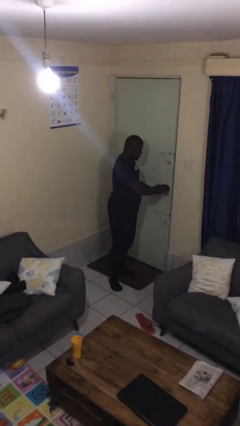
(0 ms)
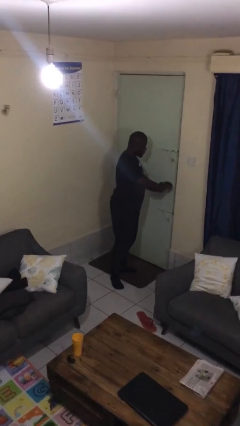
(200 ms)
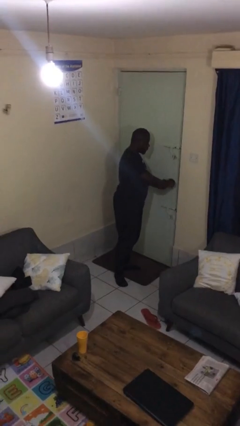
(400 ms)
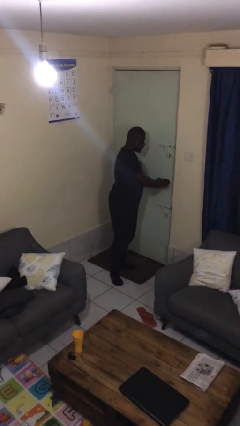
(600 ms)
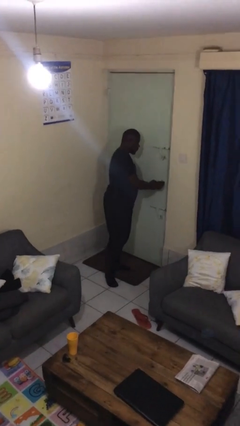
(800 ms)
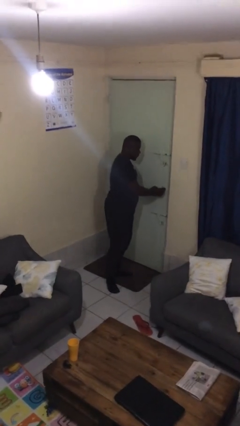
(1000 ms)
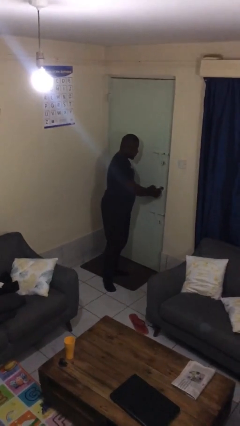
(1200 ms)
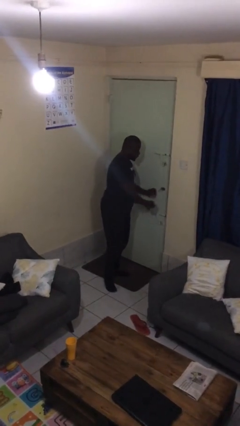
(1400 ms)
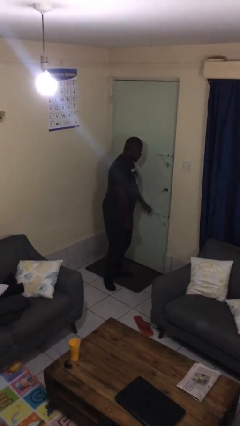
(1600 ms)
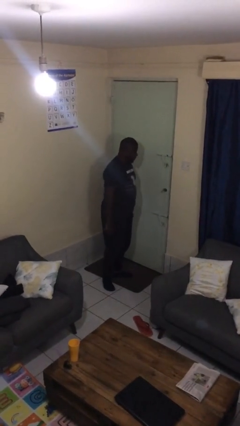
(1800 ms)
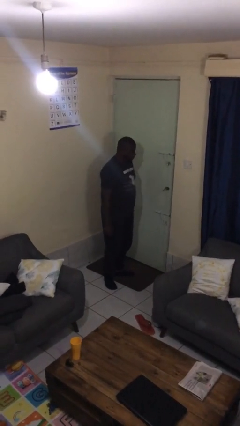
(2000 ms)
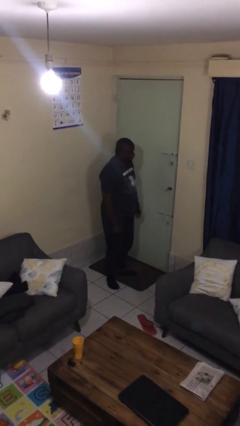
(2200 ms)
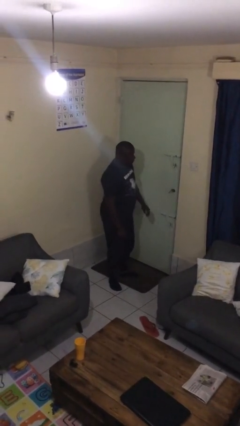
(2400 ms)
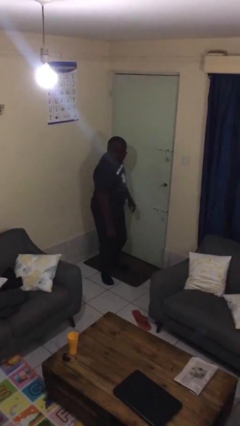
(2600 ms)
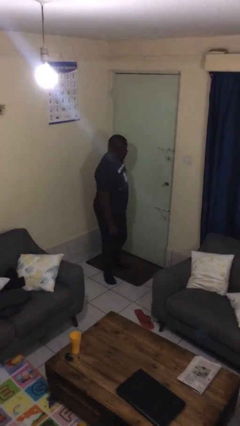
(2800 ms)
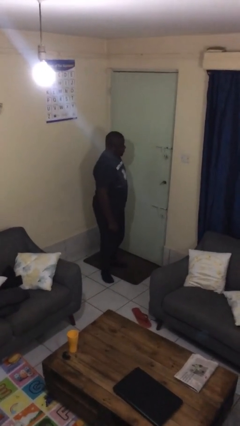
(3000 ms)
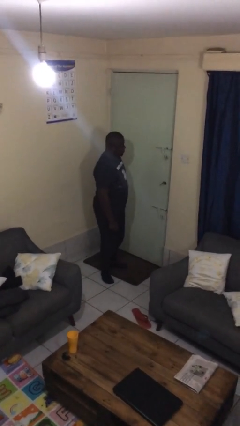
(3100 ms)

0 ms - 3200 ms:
person locks door with keys

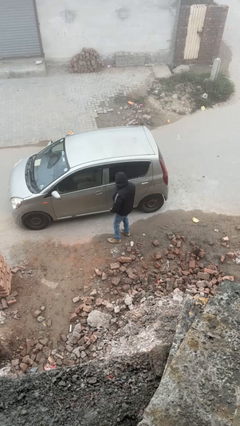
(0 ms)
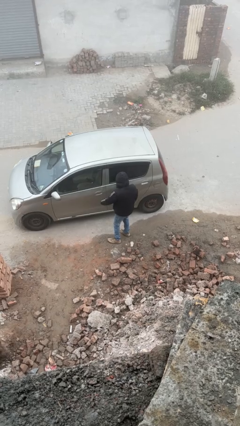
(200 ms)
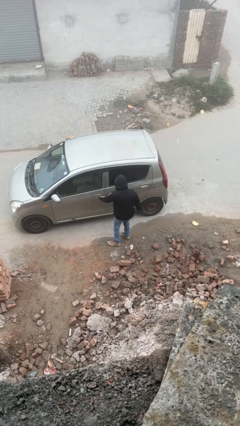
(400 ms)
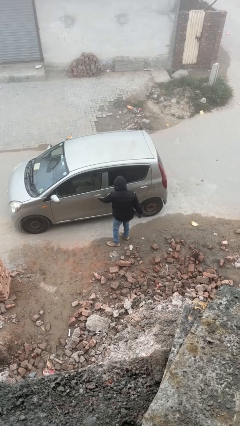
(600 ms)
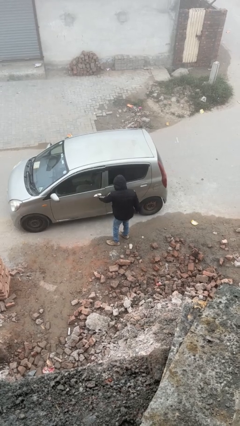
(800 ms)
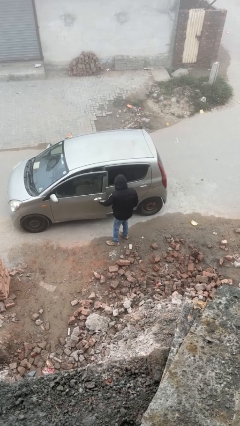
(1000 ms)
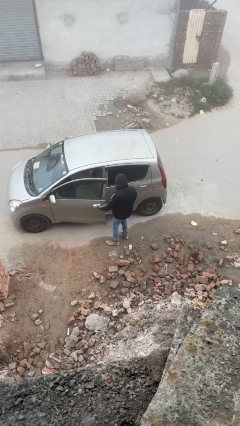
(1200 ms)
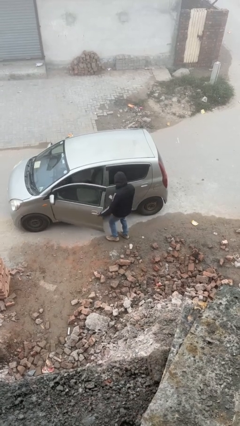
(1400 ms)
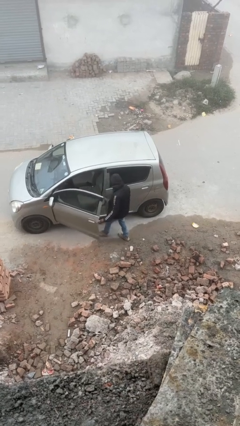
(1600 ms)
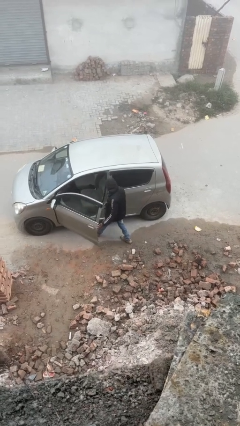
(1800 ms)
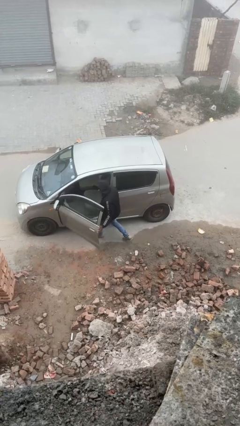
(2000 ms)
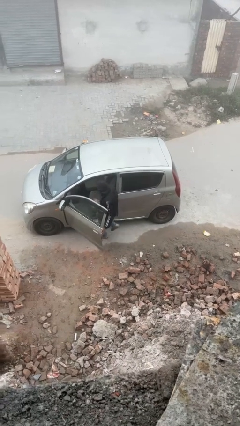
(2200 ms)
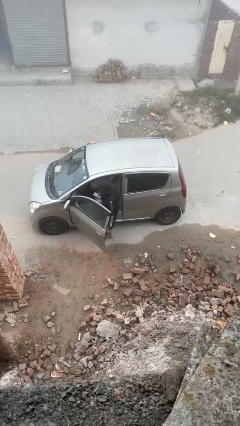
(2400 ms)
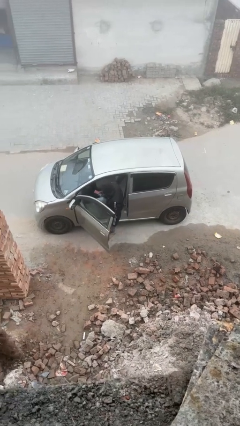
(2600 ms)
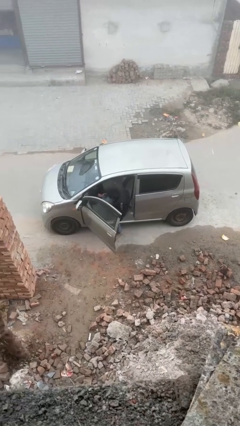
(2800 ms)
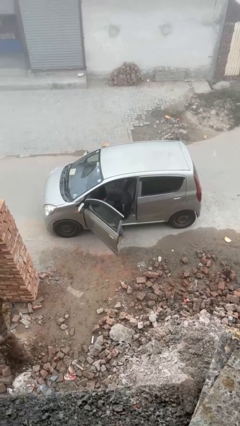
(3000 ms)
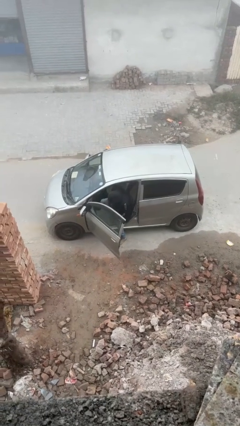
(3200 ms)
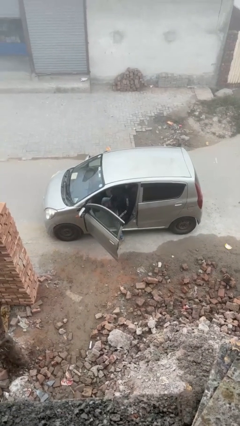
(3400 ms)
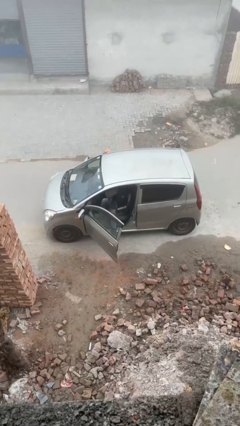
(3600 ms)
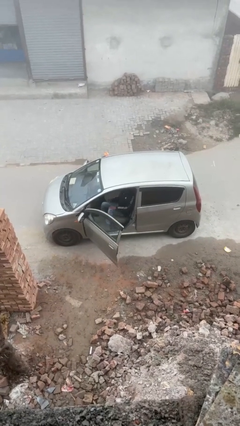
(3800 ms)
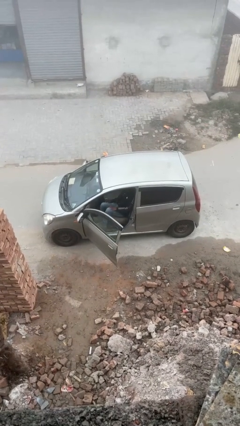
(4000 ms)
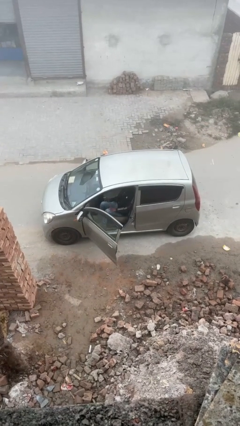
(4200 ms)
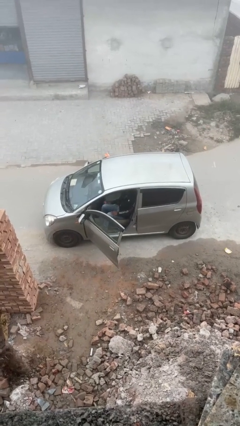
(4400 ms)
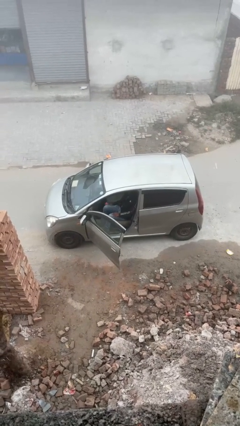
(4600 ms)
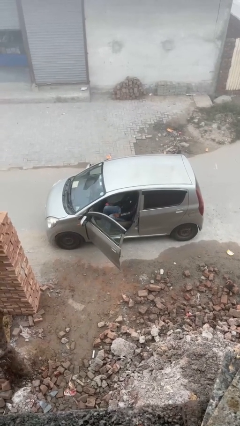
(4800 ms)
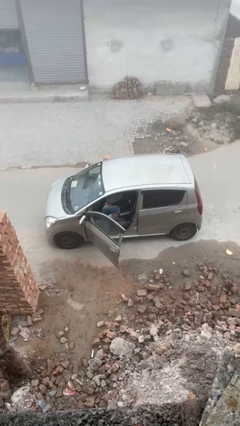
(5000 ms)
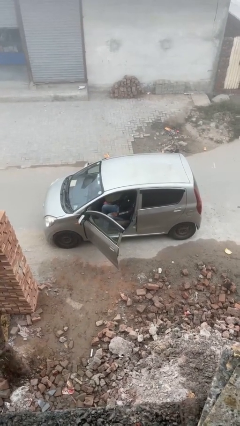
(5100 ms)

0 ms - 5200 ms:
person enters car

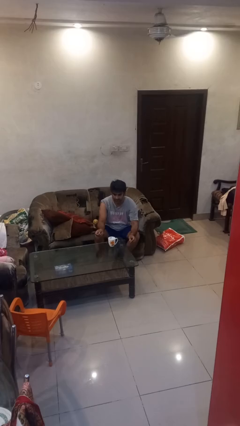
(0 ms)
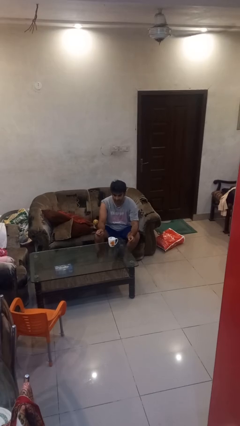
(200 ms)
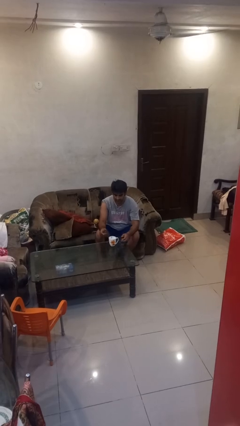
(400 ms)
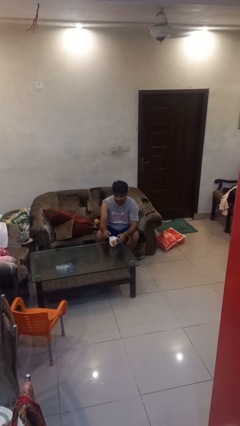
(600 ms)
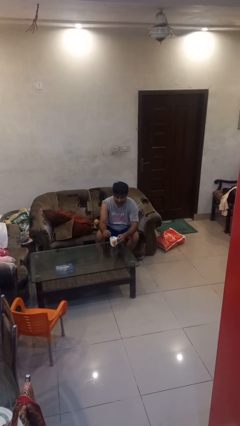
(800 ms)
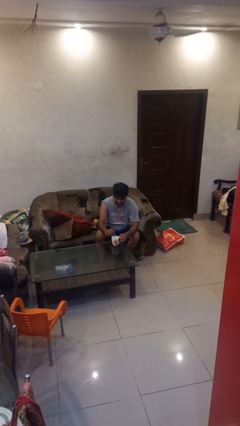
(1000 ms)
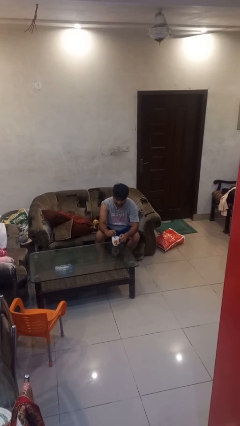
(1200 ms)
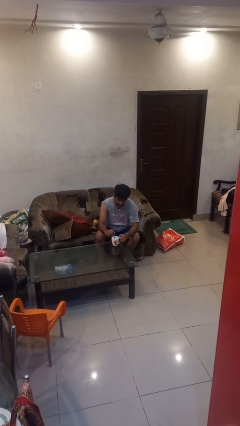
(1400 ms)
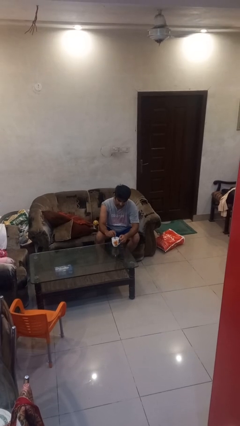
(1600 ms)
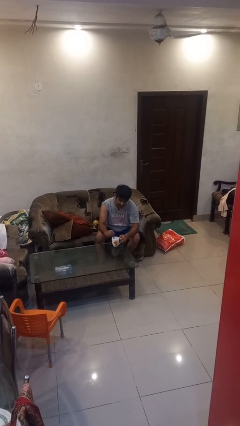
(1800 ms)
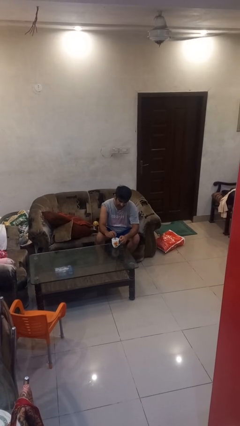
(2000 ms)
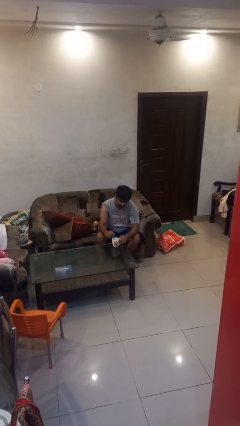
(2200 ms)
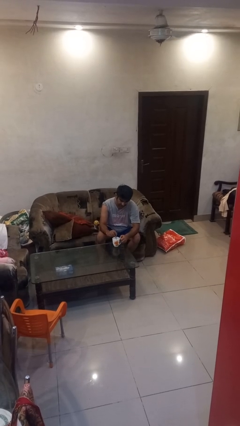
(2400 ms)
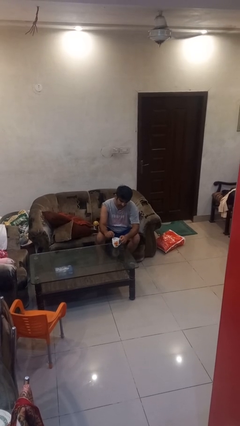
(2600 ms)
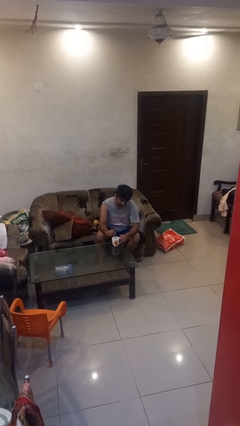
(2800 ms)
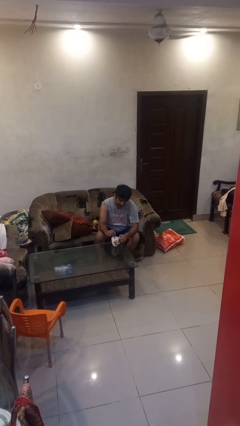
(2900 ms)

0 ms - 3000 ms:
person stirs mug

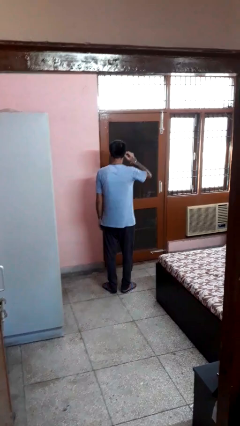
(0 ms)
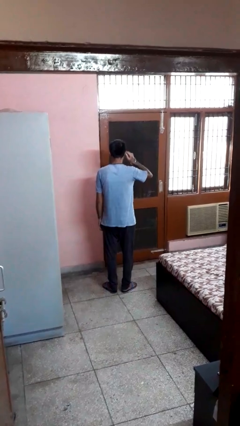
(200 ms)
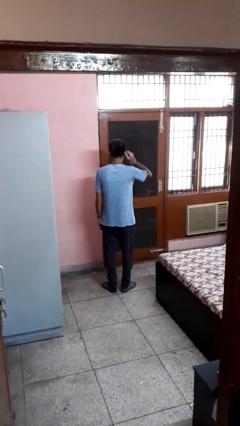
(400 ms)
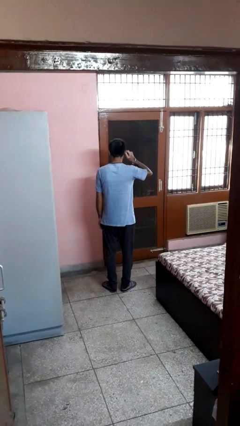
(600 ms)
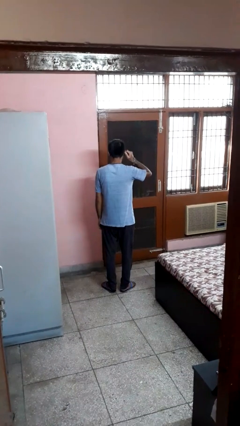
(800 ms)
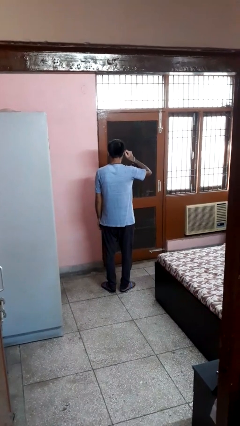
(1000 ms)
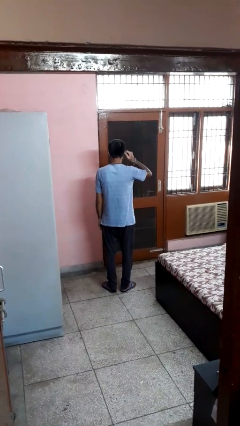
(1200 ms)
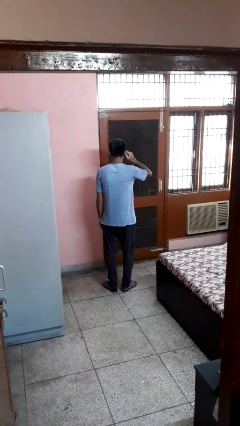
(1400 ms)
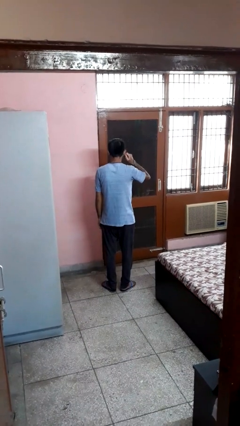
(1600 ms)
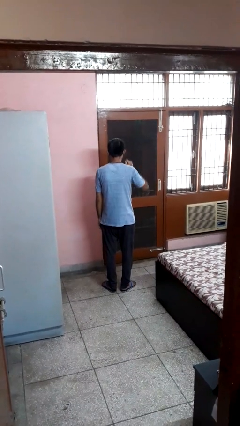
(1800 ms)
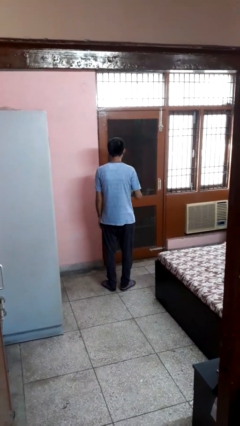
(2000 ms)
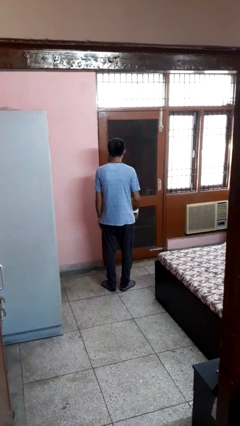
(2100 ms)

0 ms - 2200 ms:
person touches earlobe

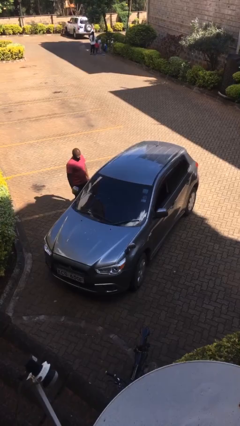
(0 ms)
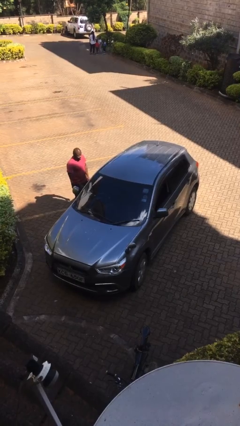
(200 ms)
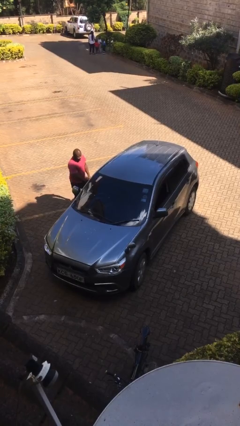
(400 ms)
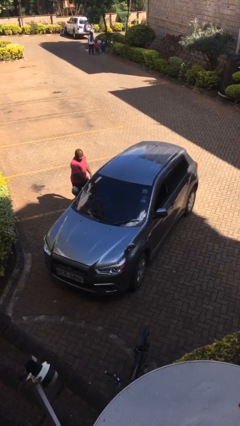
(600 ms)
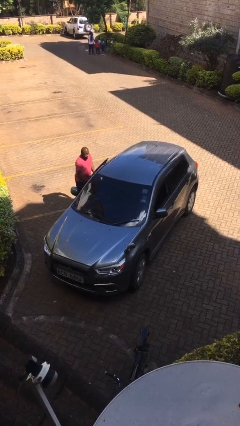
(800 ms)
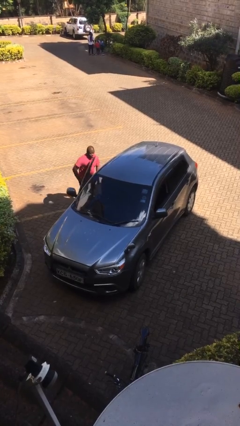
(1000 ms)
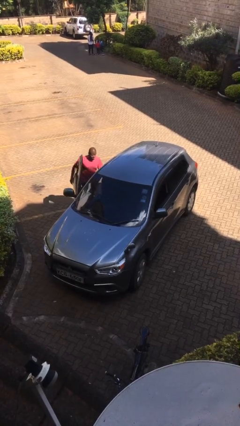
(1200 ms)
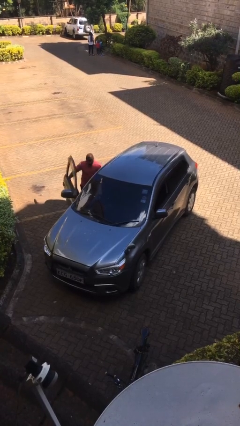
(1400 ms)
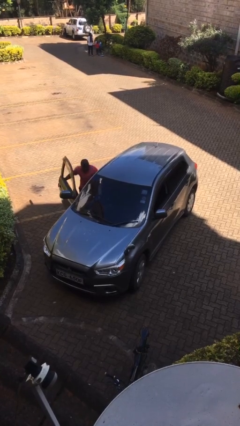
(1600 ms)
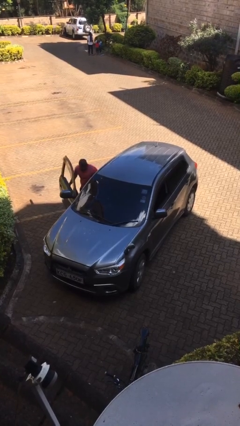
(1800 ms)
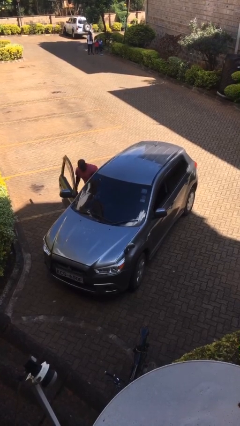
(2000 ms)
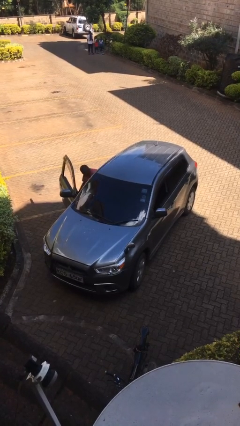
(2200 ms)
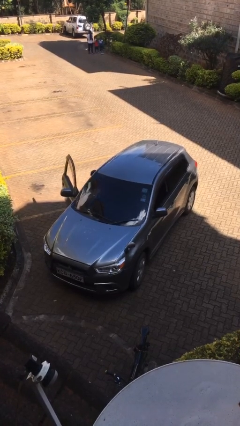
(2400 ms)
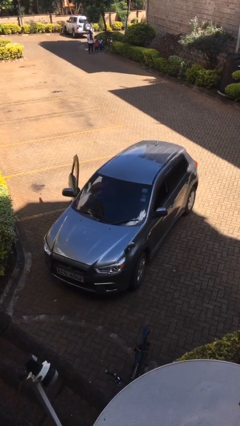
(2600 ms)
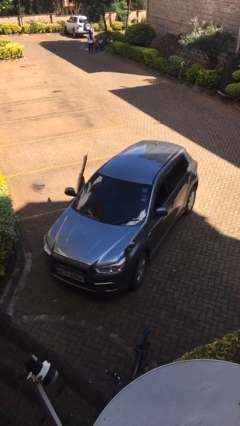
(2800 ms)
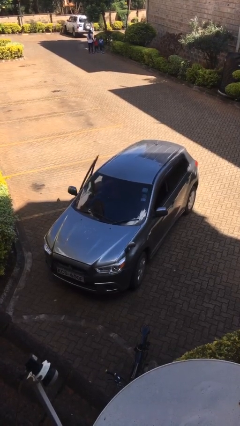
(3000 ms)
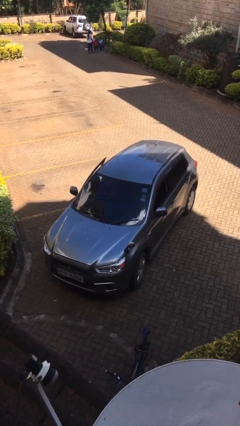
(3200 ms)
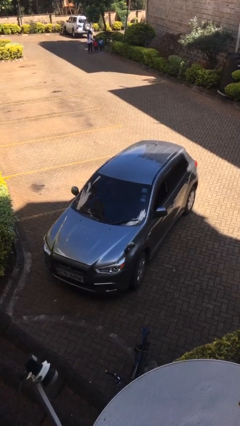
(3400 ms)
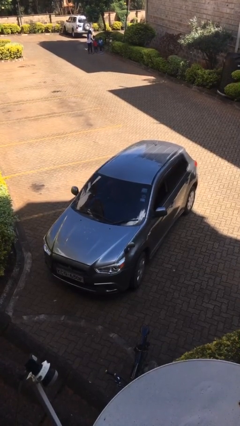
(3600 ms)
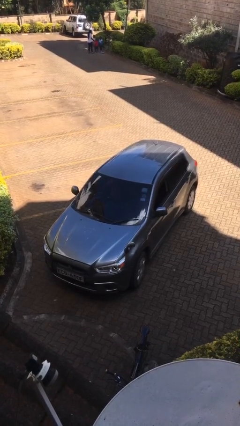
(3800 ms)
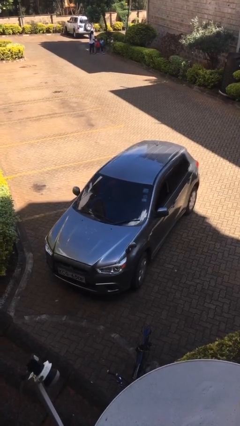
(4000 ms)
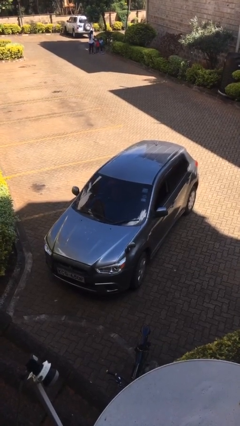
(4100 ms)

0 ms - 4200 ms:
car picks up person
